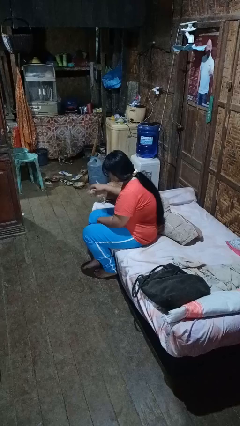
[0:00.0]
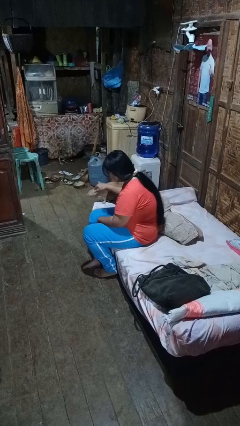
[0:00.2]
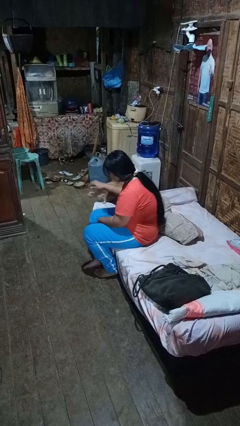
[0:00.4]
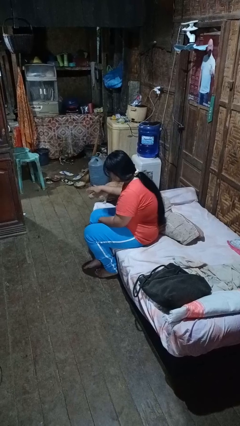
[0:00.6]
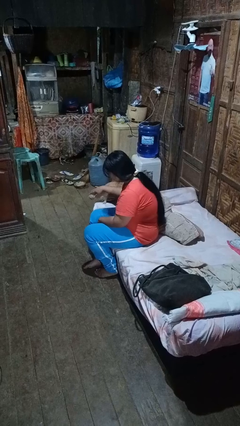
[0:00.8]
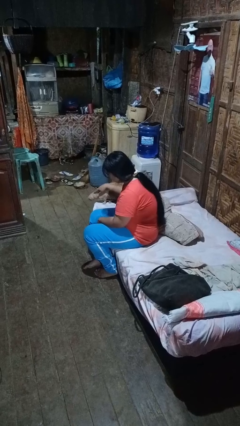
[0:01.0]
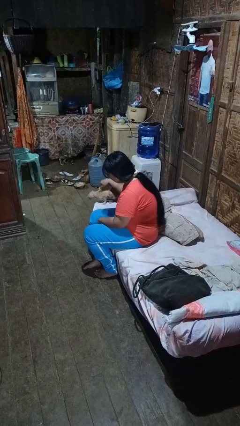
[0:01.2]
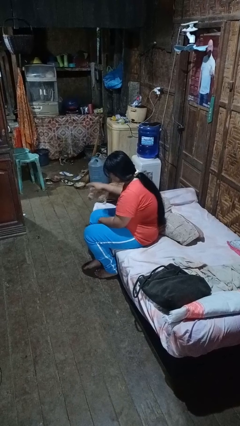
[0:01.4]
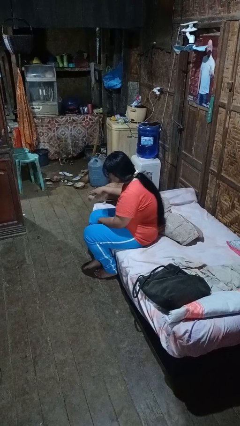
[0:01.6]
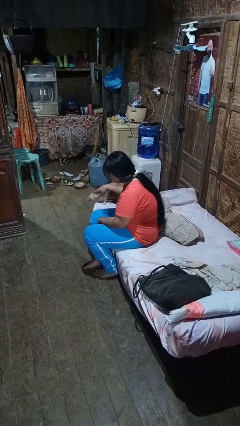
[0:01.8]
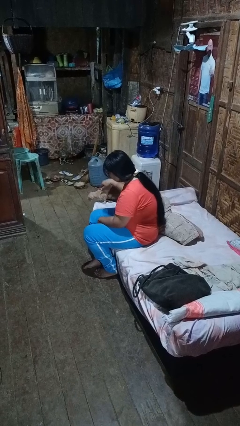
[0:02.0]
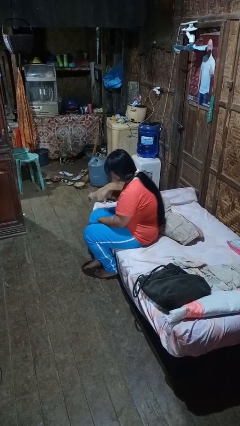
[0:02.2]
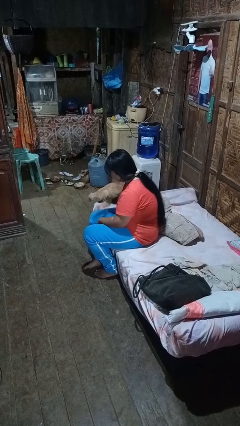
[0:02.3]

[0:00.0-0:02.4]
person pets cat

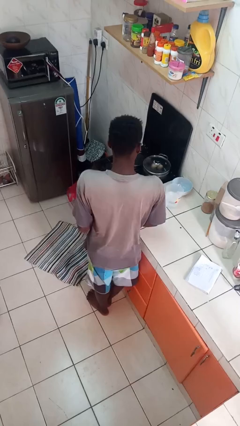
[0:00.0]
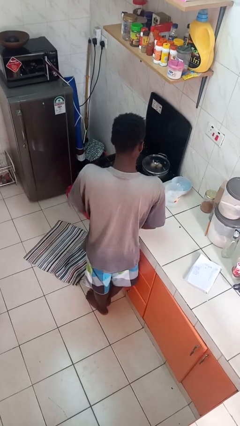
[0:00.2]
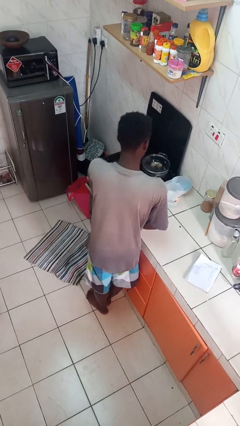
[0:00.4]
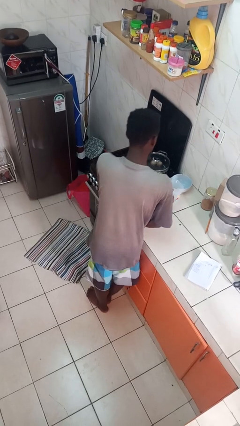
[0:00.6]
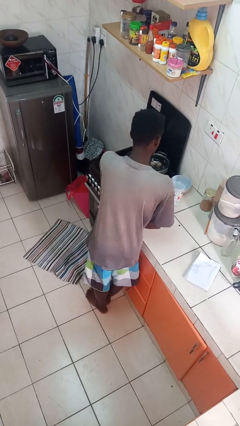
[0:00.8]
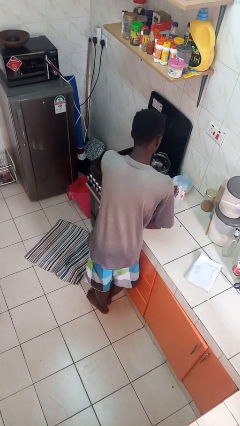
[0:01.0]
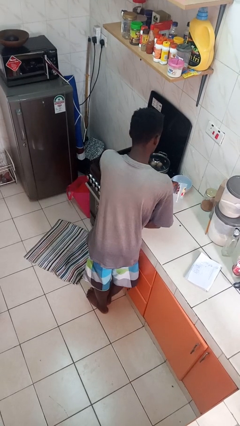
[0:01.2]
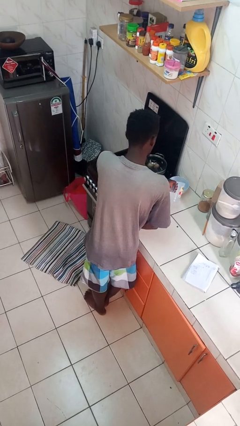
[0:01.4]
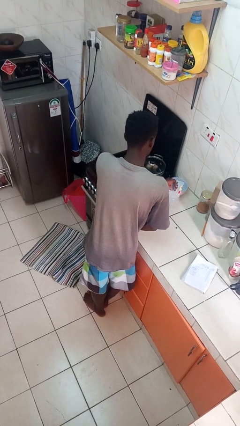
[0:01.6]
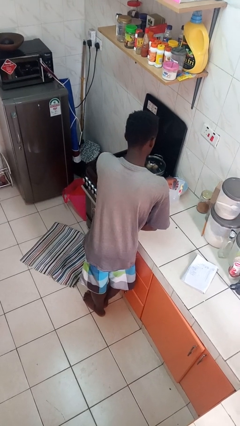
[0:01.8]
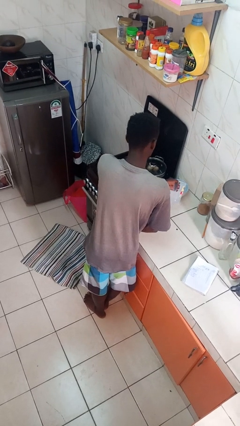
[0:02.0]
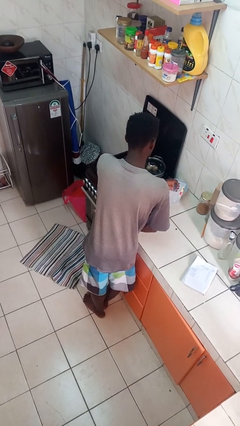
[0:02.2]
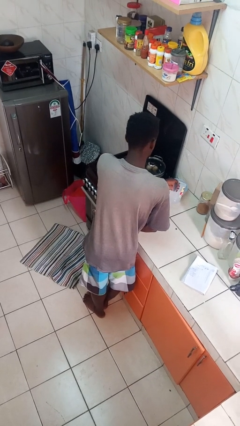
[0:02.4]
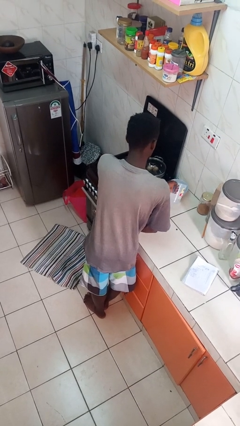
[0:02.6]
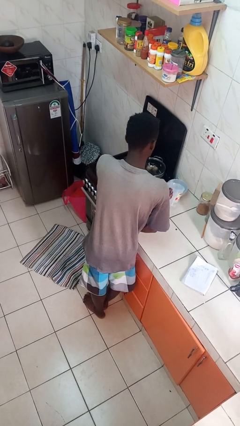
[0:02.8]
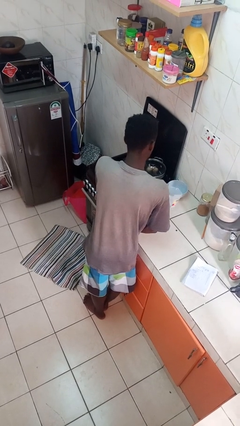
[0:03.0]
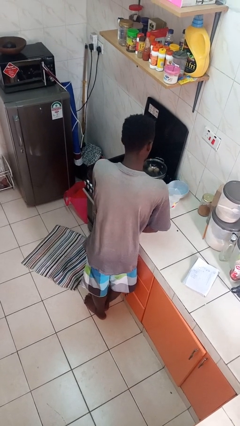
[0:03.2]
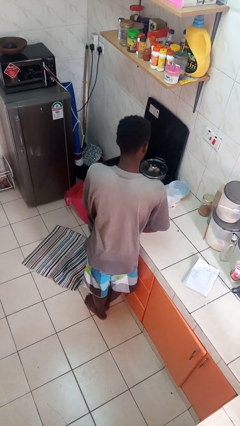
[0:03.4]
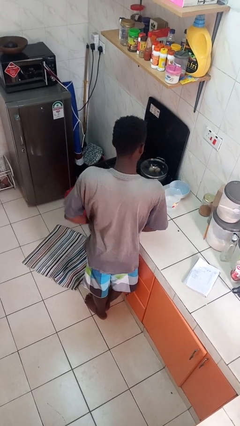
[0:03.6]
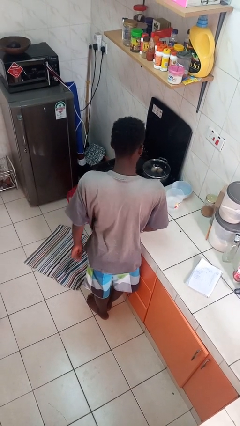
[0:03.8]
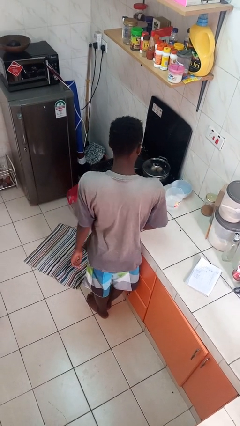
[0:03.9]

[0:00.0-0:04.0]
person pours into bowl

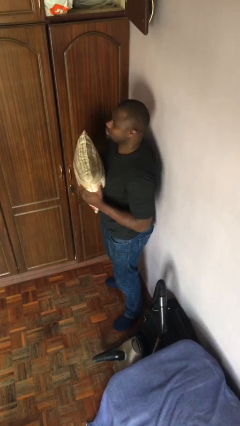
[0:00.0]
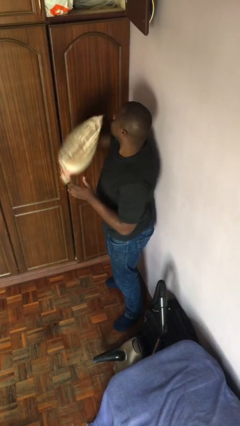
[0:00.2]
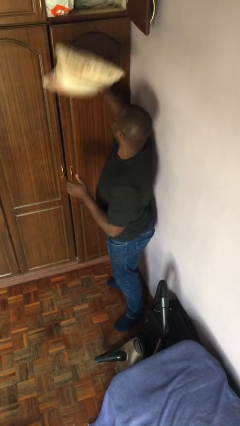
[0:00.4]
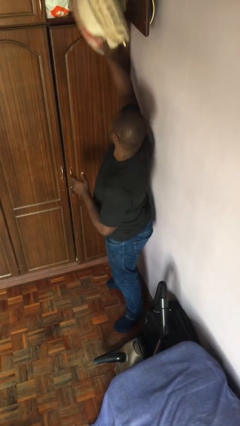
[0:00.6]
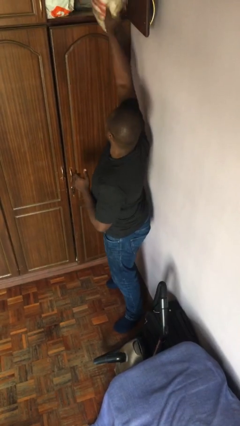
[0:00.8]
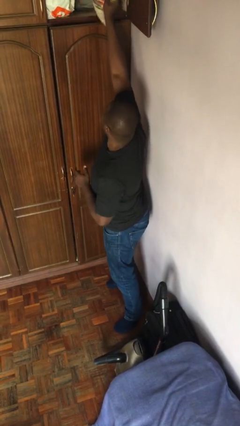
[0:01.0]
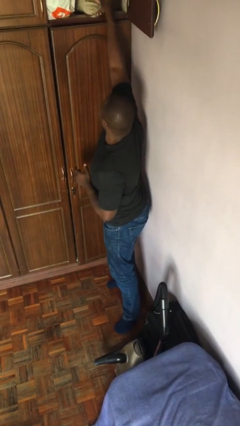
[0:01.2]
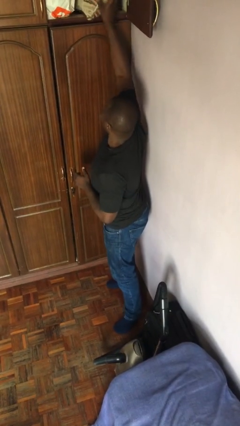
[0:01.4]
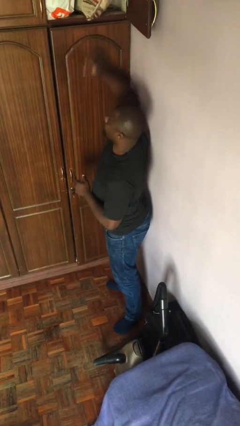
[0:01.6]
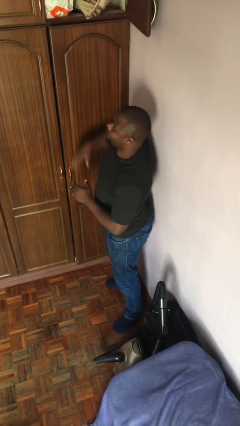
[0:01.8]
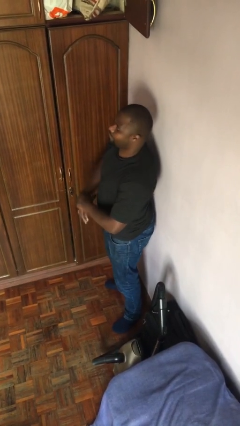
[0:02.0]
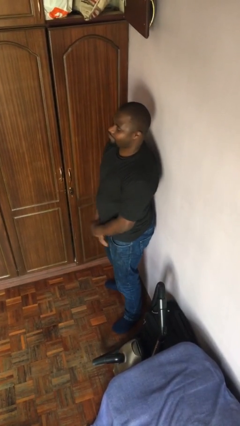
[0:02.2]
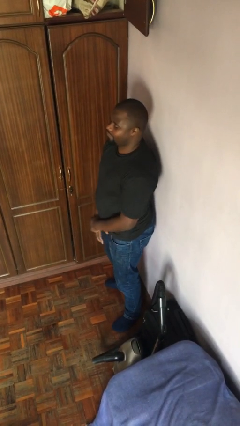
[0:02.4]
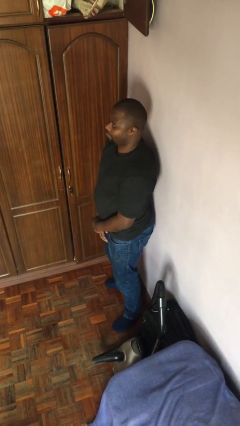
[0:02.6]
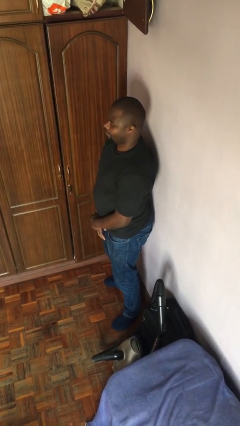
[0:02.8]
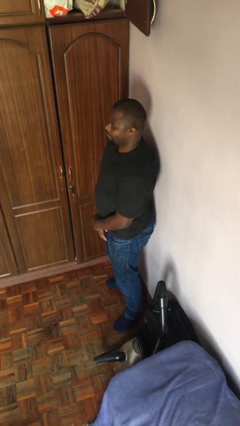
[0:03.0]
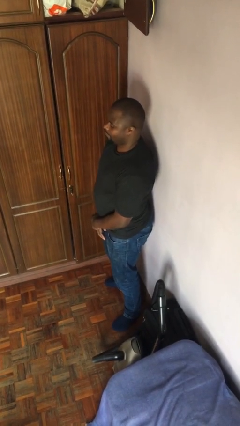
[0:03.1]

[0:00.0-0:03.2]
person puts down object on shelf

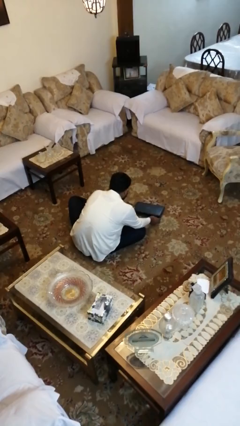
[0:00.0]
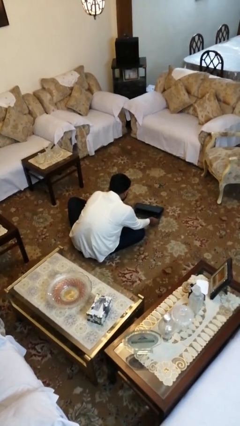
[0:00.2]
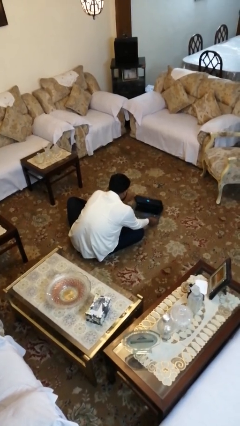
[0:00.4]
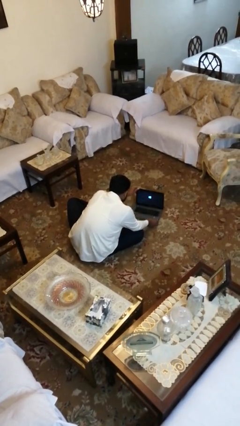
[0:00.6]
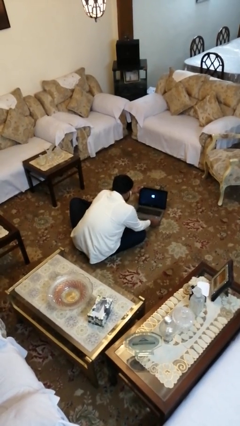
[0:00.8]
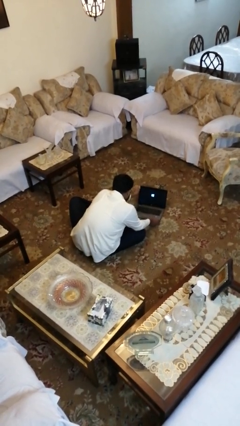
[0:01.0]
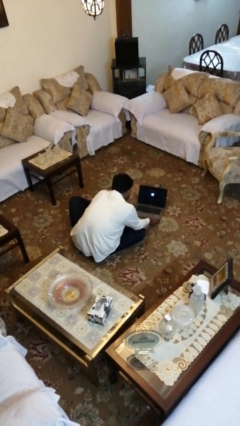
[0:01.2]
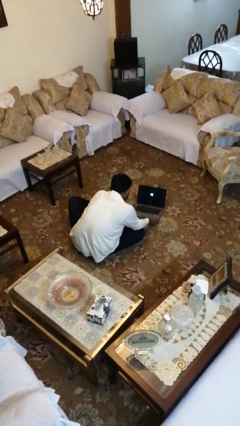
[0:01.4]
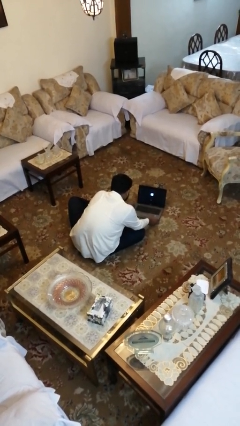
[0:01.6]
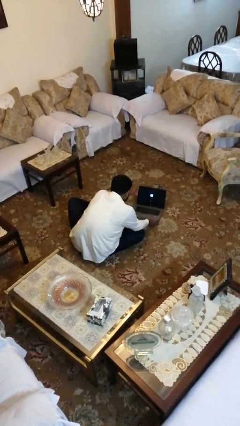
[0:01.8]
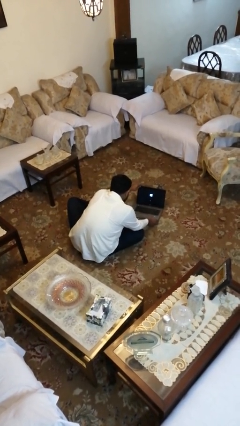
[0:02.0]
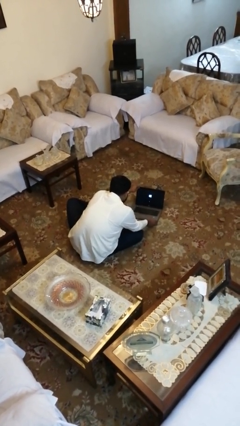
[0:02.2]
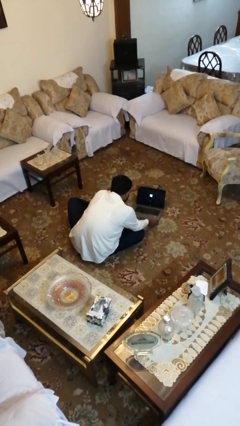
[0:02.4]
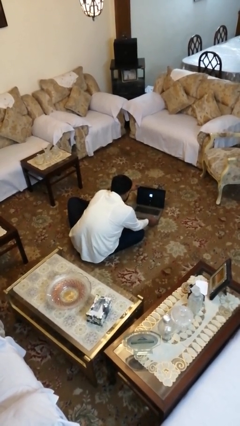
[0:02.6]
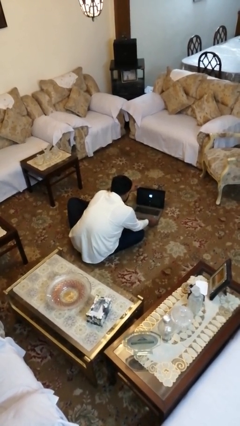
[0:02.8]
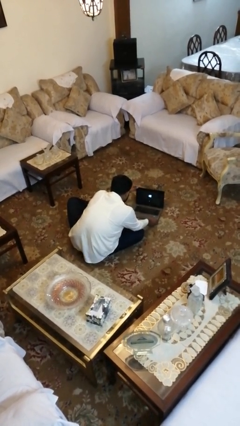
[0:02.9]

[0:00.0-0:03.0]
person opens laptop

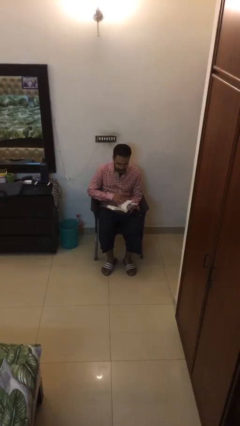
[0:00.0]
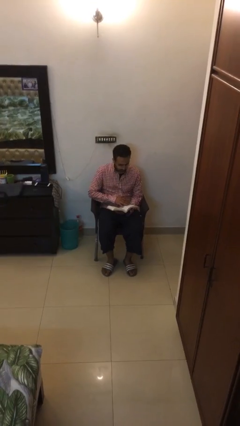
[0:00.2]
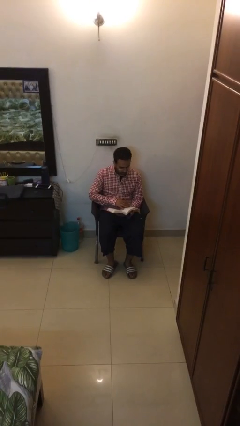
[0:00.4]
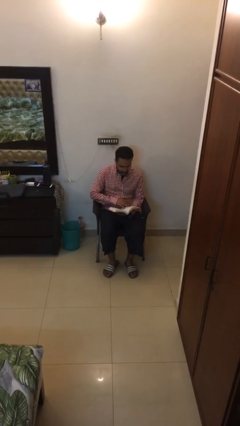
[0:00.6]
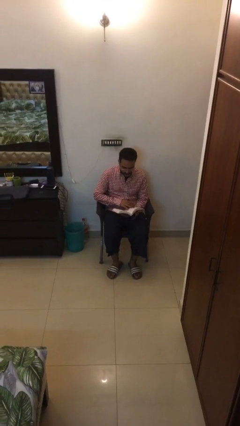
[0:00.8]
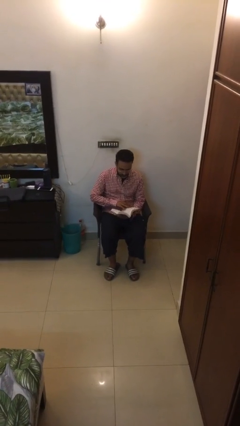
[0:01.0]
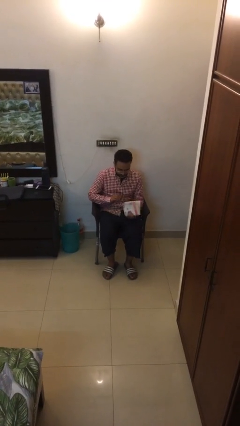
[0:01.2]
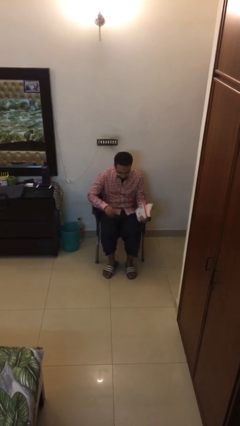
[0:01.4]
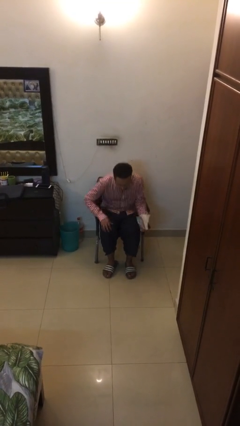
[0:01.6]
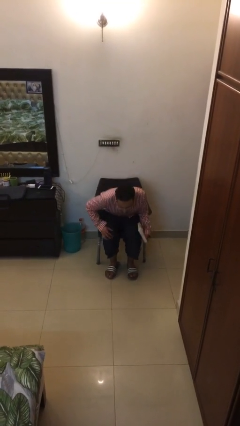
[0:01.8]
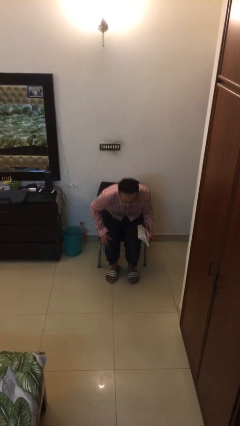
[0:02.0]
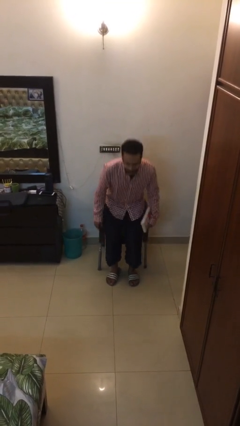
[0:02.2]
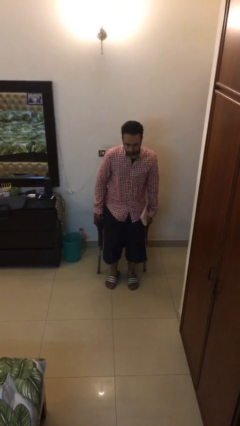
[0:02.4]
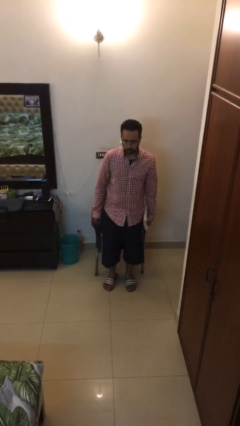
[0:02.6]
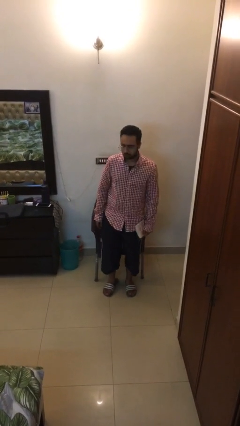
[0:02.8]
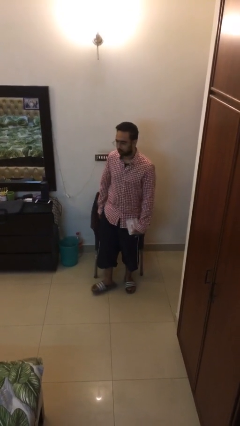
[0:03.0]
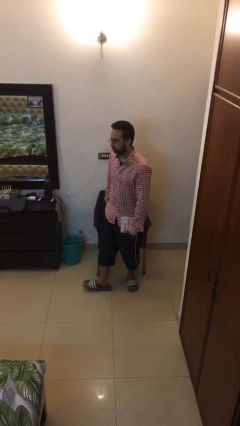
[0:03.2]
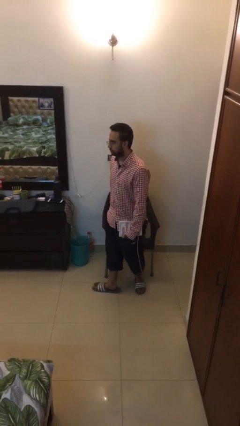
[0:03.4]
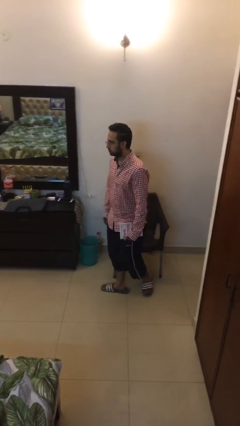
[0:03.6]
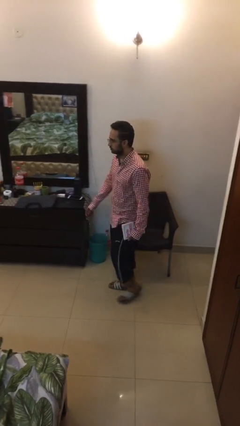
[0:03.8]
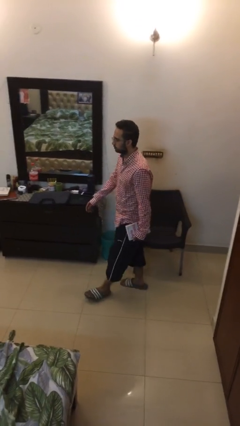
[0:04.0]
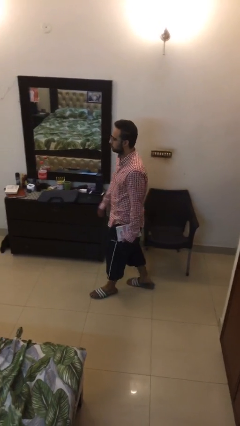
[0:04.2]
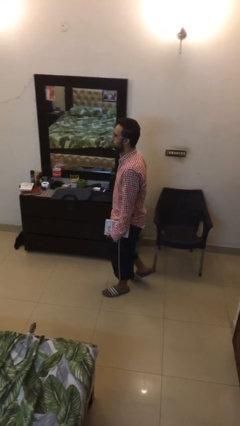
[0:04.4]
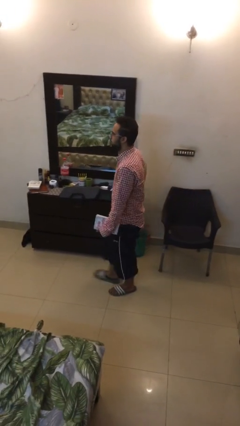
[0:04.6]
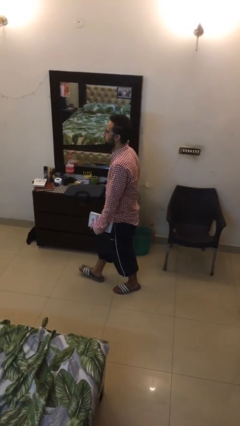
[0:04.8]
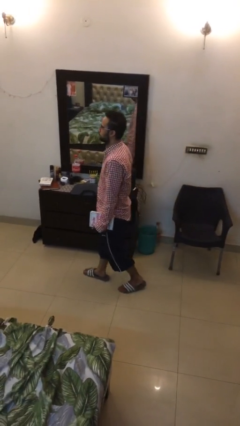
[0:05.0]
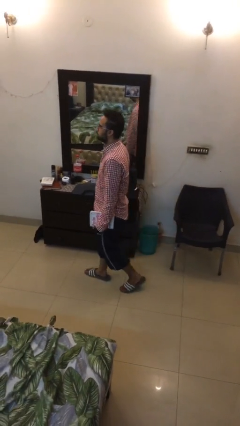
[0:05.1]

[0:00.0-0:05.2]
person stands up
